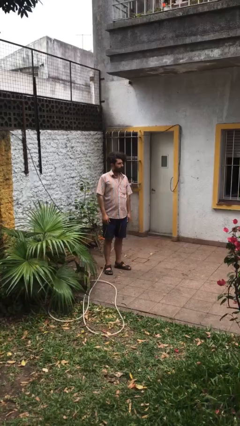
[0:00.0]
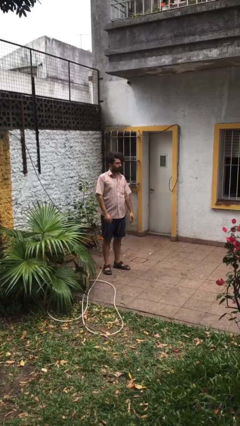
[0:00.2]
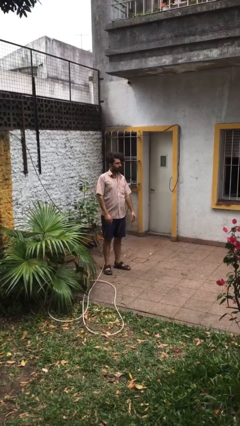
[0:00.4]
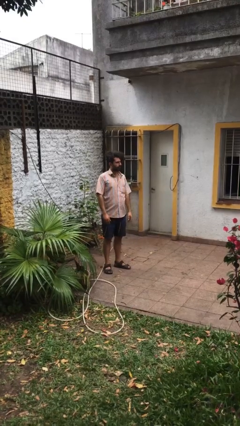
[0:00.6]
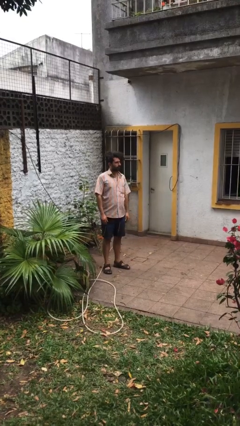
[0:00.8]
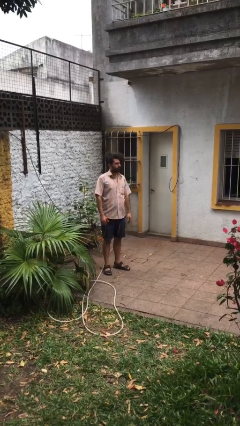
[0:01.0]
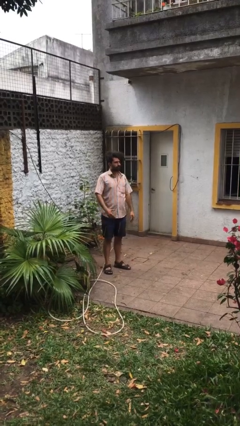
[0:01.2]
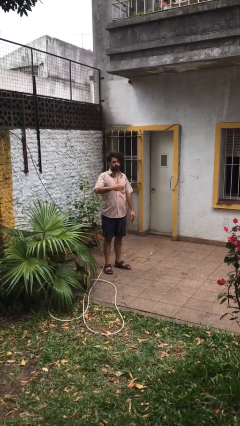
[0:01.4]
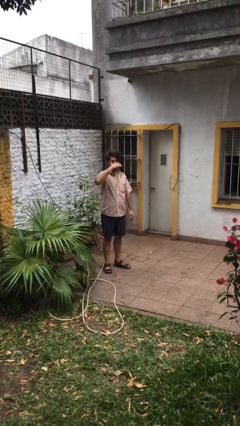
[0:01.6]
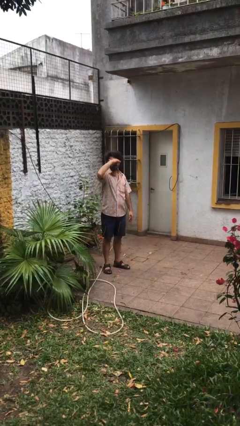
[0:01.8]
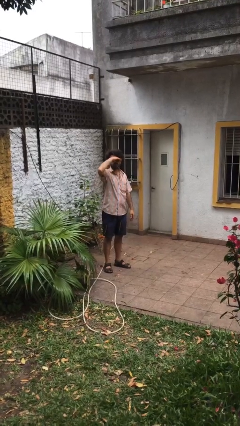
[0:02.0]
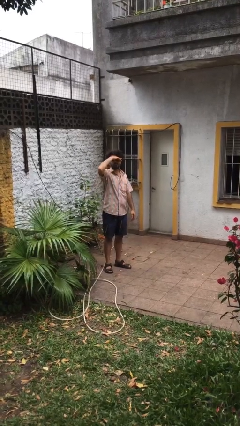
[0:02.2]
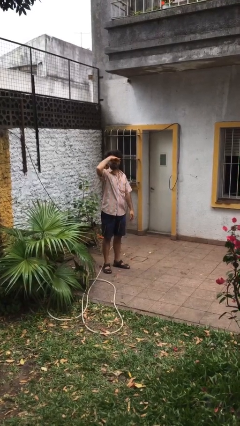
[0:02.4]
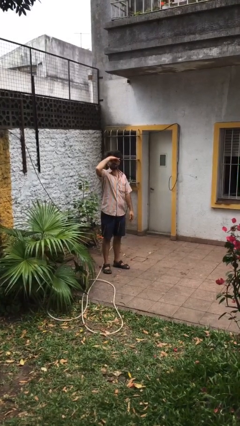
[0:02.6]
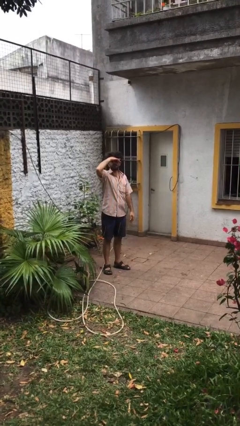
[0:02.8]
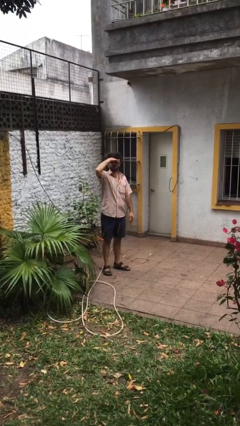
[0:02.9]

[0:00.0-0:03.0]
person shades eyes

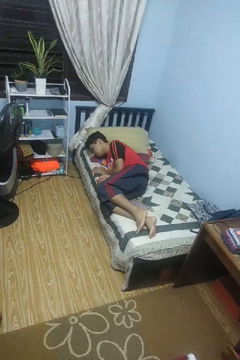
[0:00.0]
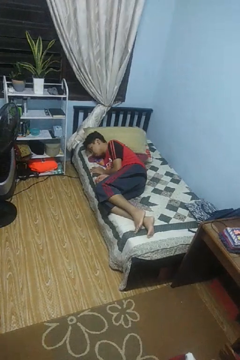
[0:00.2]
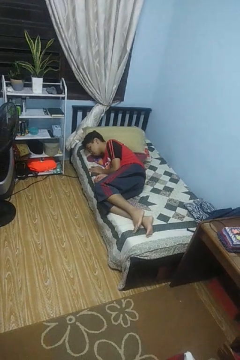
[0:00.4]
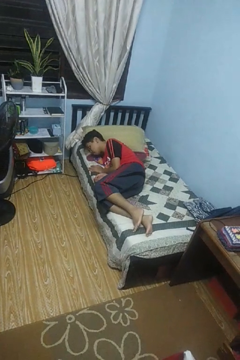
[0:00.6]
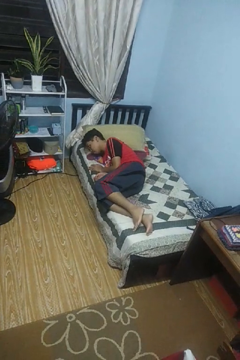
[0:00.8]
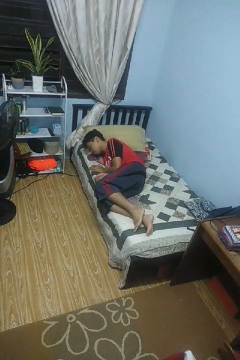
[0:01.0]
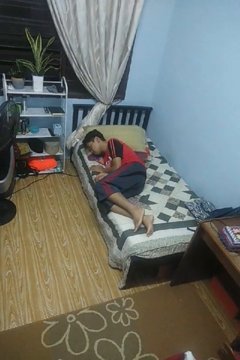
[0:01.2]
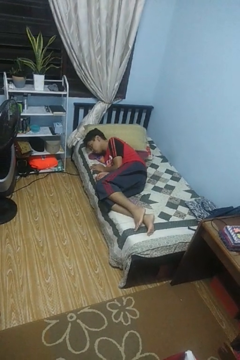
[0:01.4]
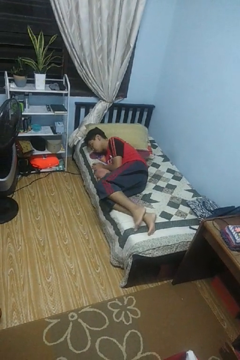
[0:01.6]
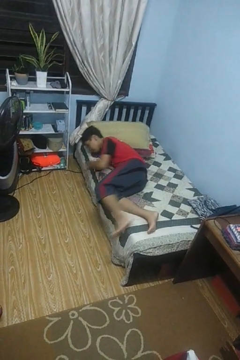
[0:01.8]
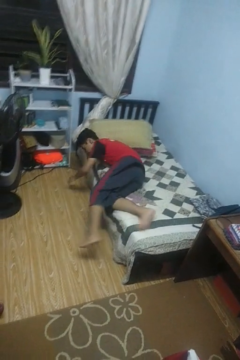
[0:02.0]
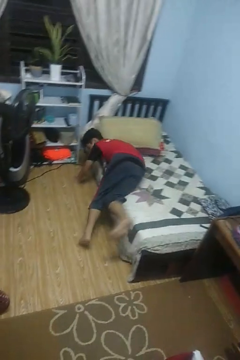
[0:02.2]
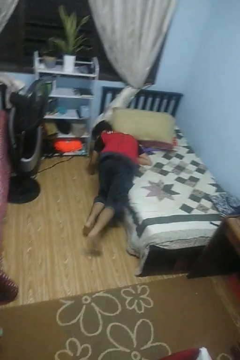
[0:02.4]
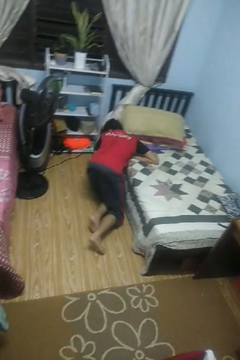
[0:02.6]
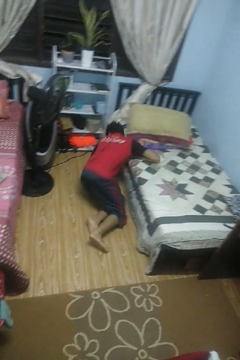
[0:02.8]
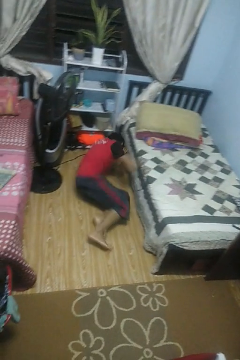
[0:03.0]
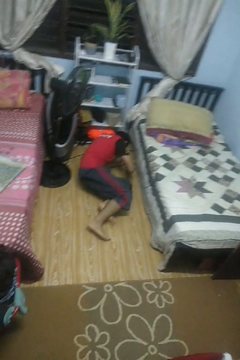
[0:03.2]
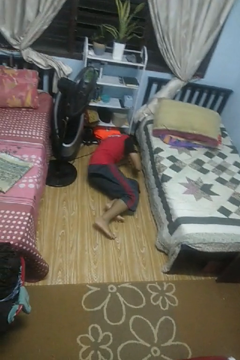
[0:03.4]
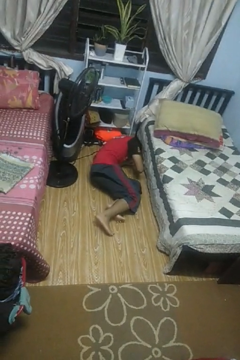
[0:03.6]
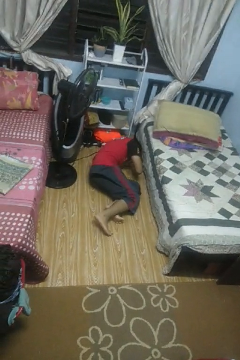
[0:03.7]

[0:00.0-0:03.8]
person falls from bed

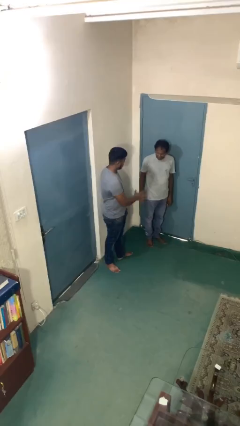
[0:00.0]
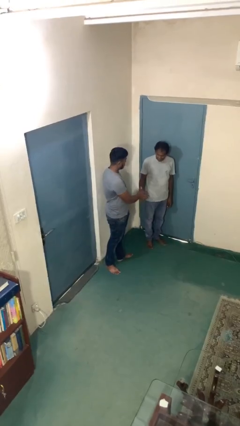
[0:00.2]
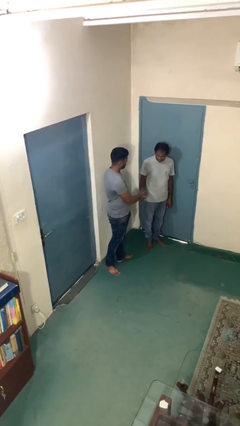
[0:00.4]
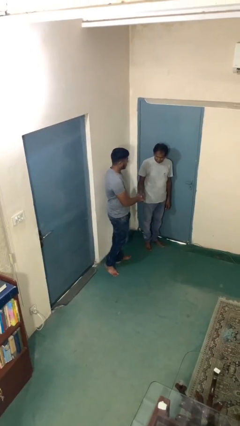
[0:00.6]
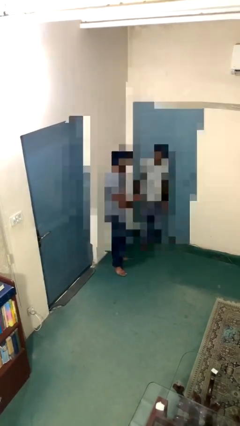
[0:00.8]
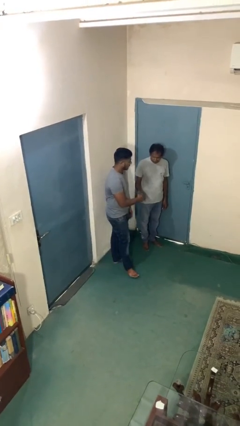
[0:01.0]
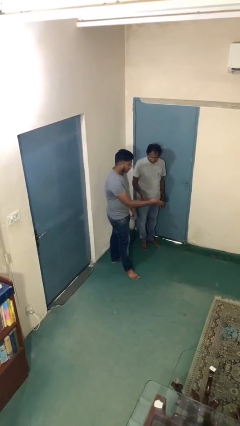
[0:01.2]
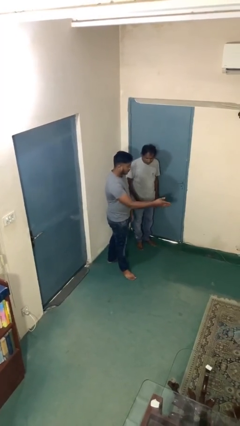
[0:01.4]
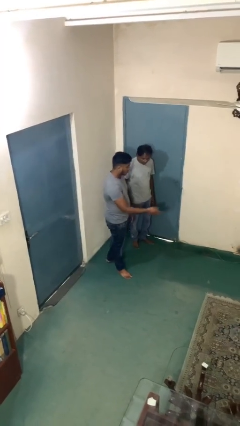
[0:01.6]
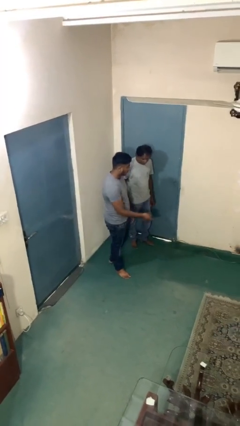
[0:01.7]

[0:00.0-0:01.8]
person shakes hand

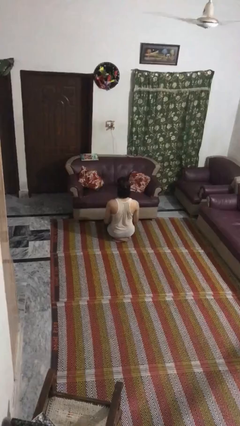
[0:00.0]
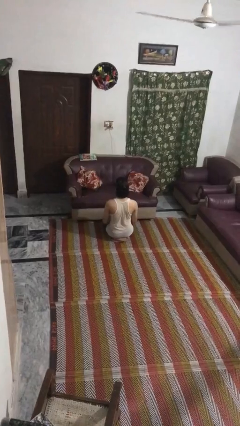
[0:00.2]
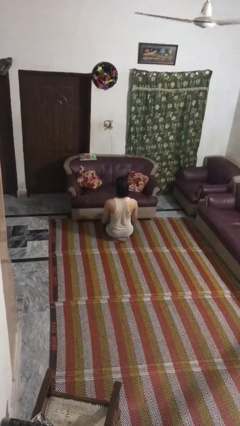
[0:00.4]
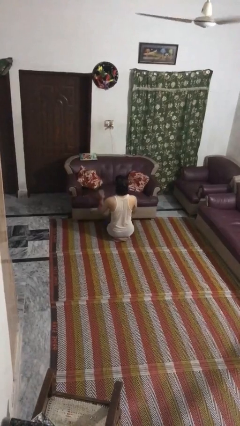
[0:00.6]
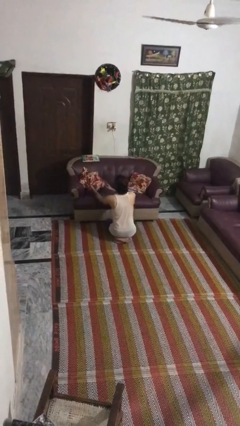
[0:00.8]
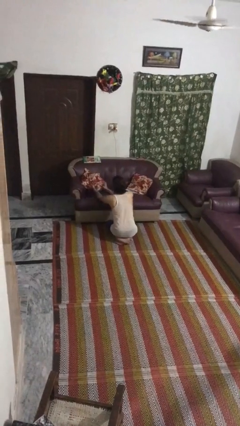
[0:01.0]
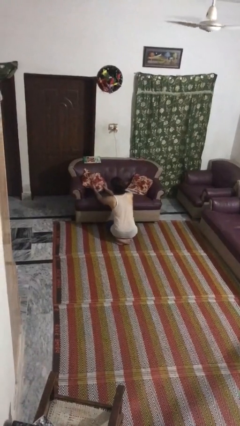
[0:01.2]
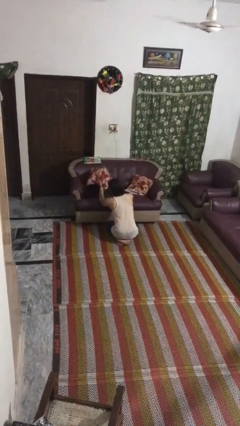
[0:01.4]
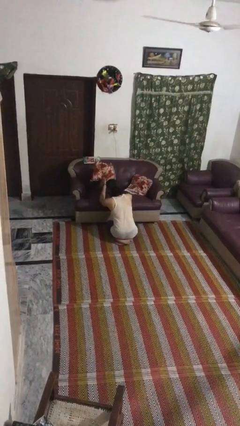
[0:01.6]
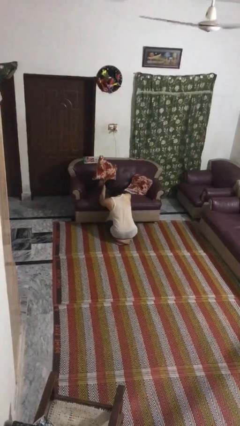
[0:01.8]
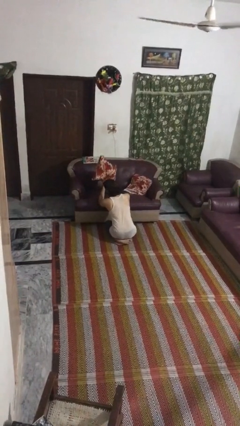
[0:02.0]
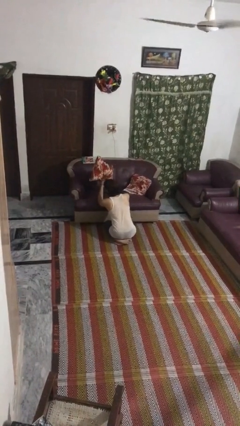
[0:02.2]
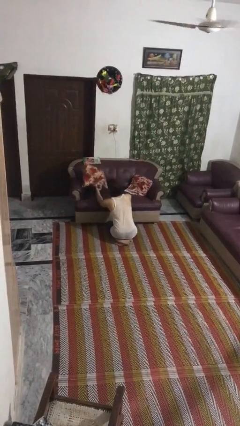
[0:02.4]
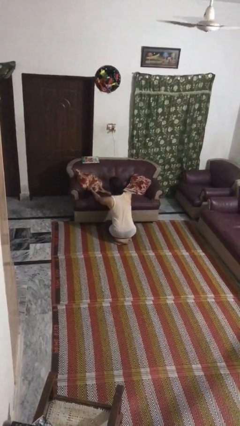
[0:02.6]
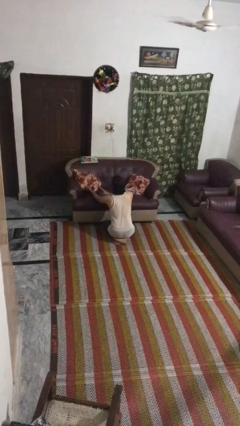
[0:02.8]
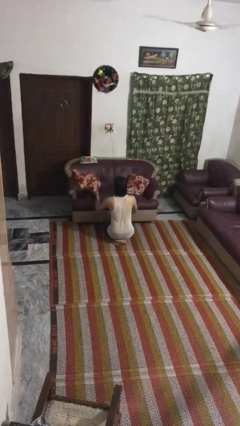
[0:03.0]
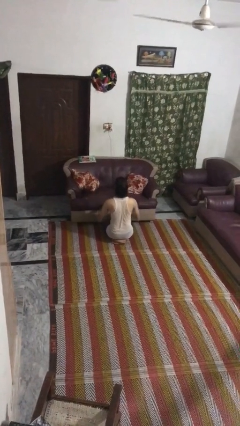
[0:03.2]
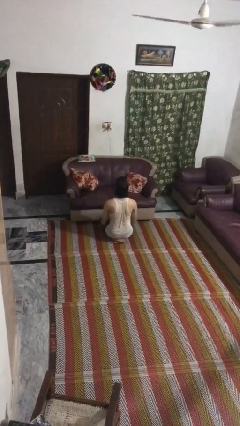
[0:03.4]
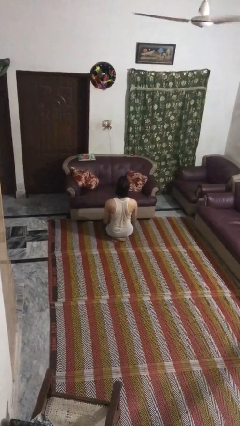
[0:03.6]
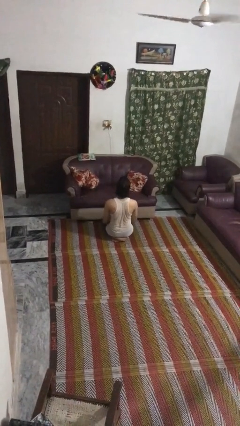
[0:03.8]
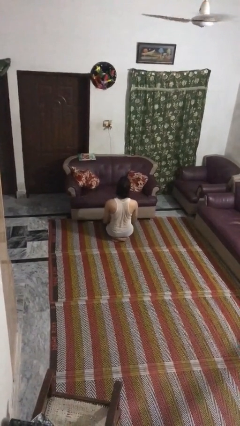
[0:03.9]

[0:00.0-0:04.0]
person searches in couch

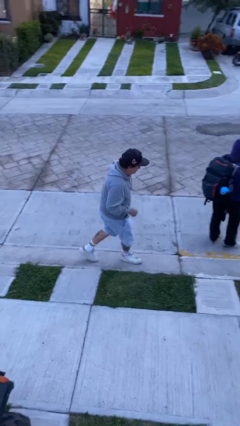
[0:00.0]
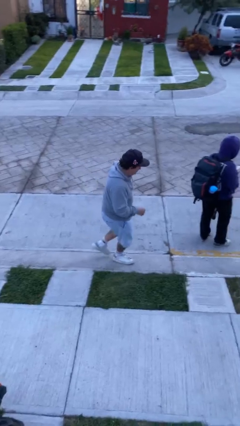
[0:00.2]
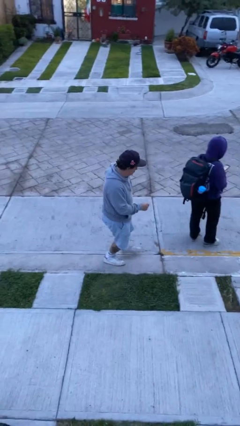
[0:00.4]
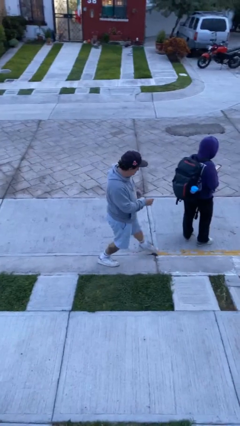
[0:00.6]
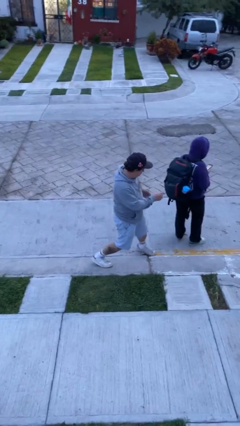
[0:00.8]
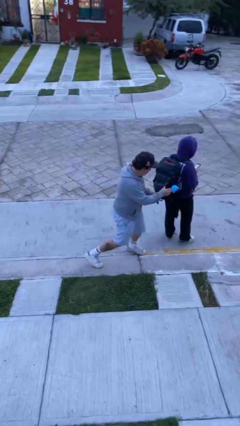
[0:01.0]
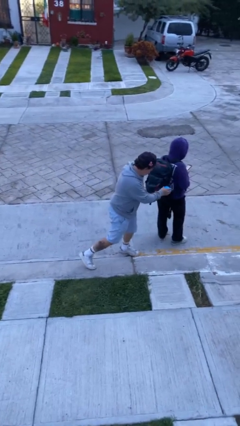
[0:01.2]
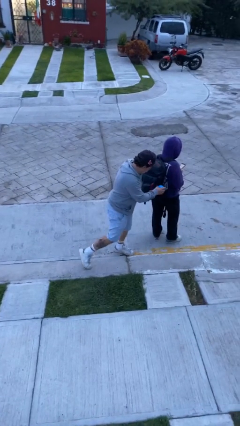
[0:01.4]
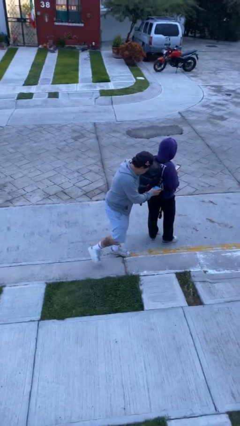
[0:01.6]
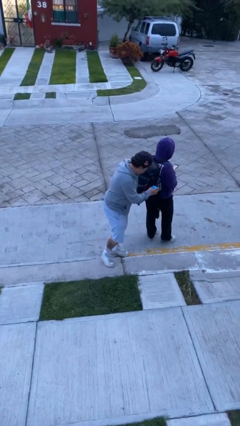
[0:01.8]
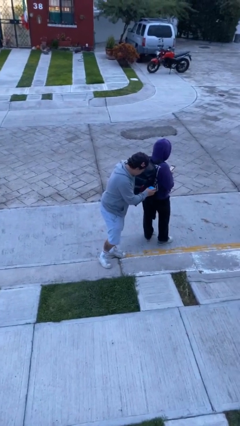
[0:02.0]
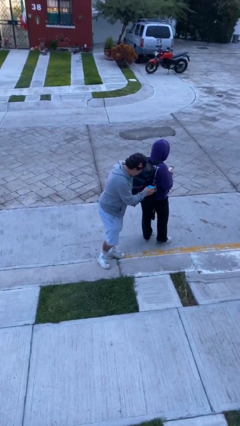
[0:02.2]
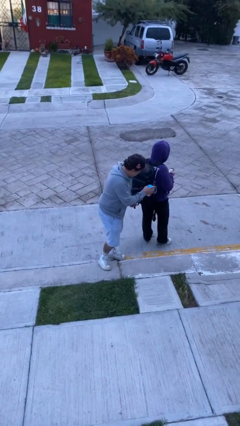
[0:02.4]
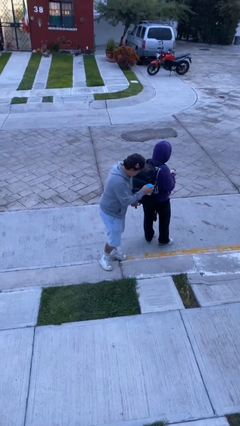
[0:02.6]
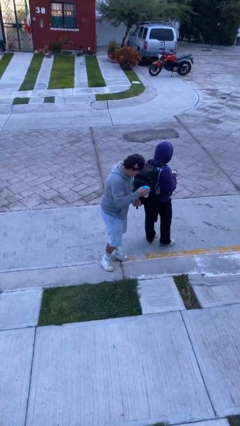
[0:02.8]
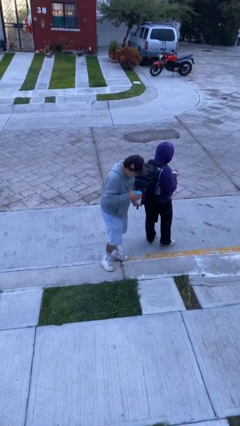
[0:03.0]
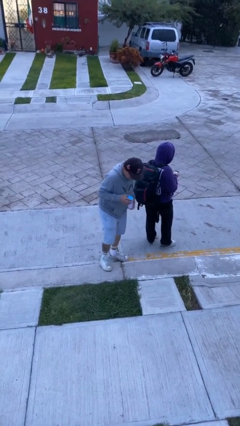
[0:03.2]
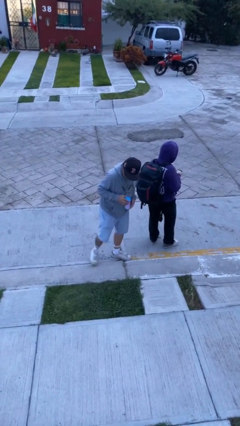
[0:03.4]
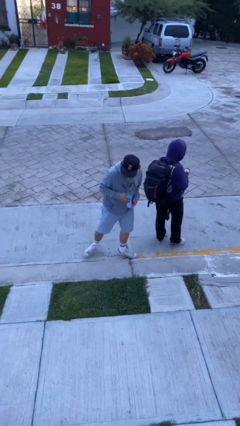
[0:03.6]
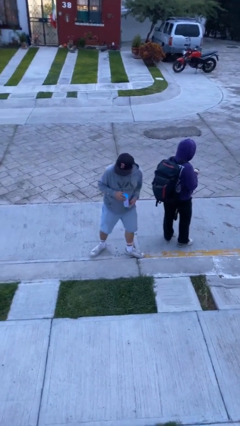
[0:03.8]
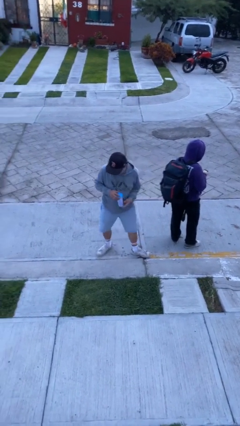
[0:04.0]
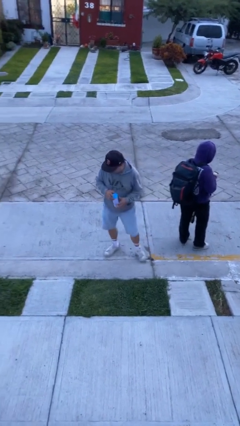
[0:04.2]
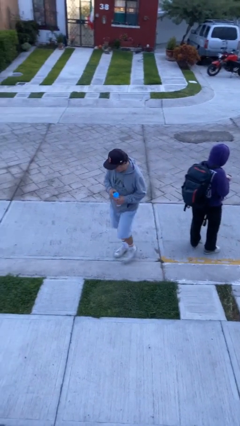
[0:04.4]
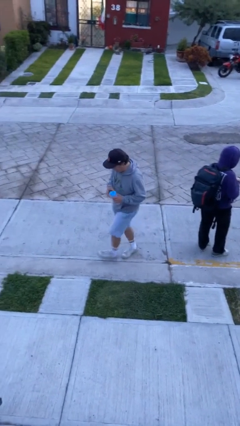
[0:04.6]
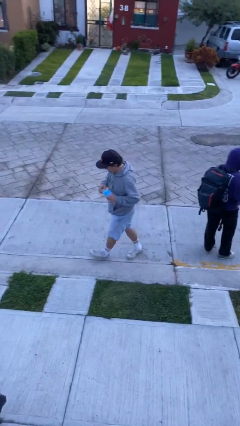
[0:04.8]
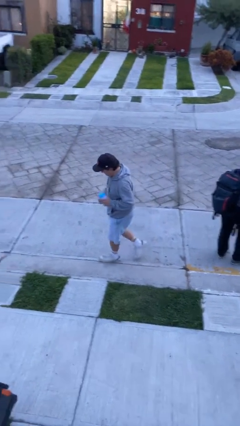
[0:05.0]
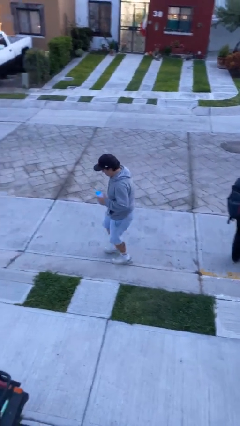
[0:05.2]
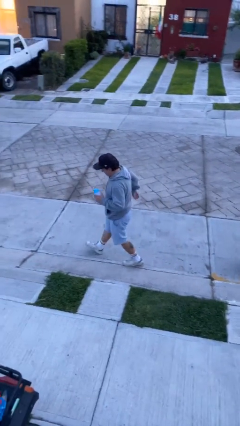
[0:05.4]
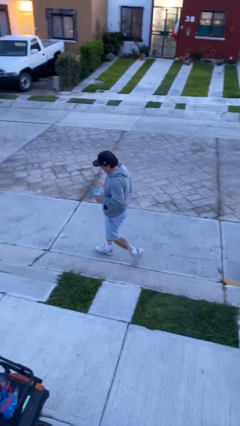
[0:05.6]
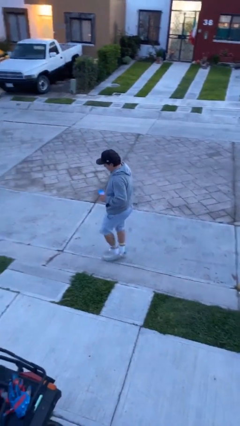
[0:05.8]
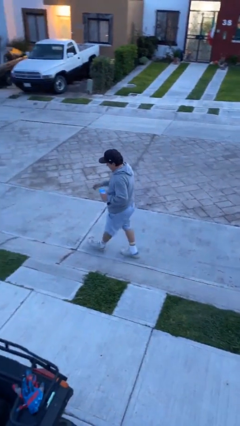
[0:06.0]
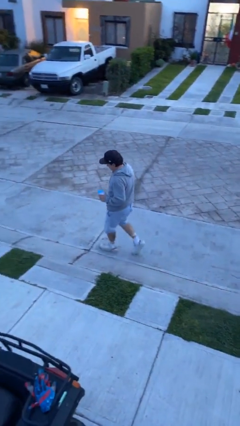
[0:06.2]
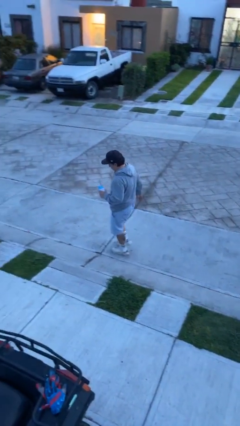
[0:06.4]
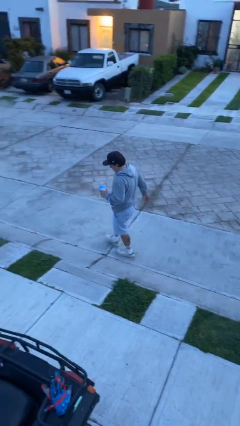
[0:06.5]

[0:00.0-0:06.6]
person steals object from person
